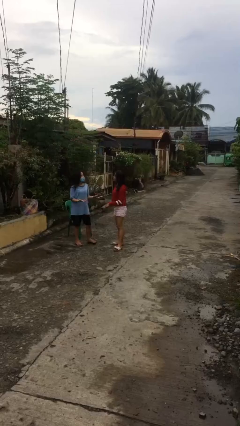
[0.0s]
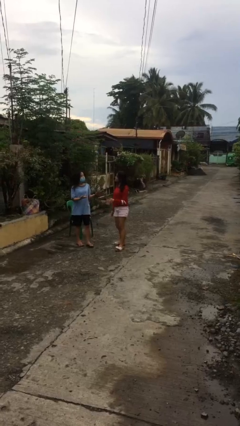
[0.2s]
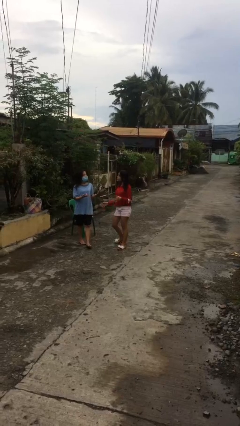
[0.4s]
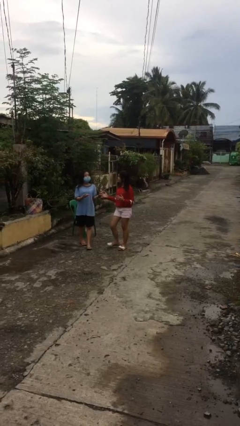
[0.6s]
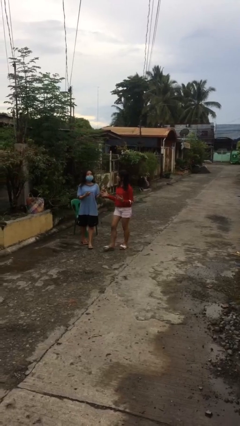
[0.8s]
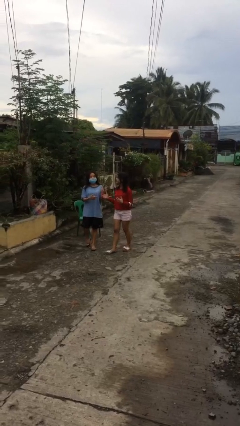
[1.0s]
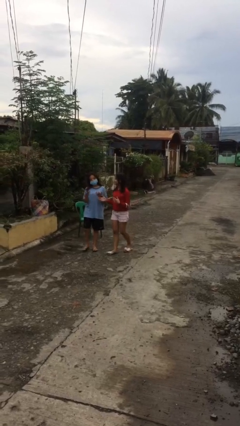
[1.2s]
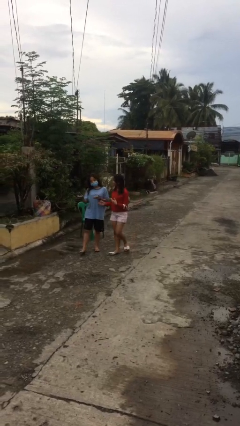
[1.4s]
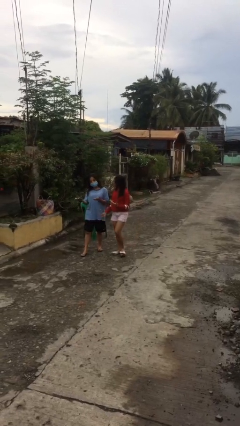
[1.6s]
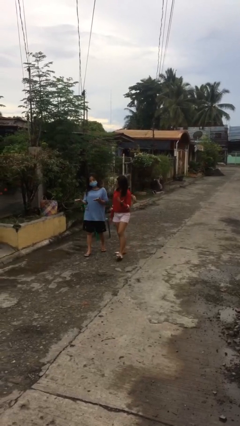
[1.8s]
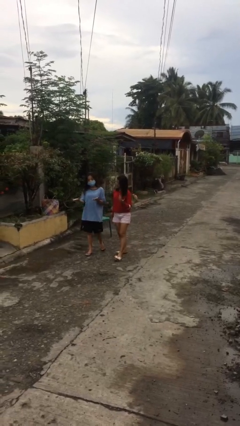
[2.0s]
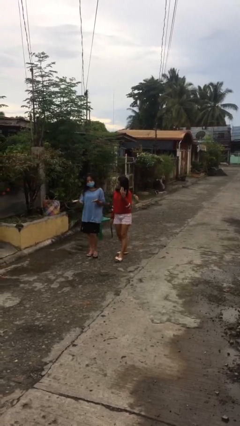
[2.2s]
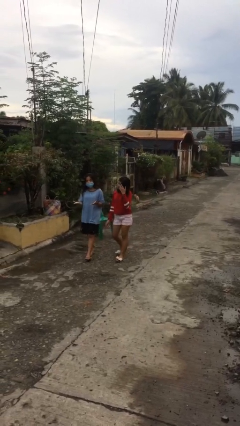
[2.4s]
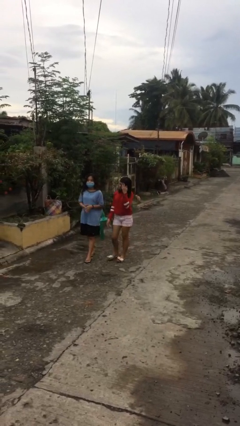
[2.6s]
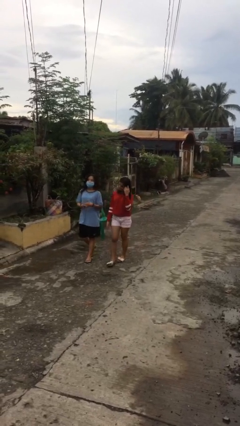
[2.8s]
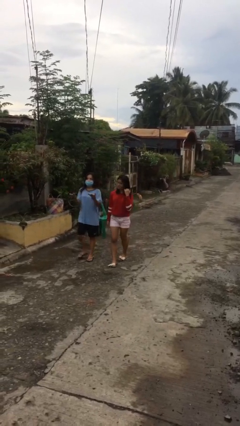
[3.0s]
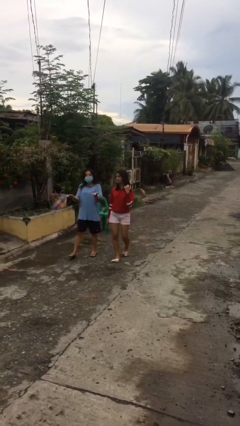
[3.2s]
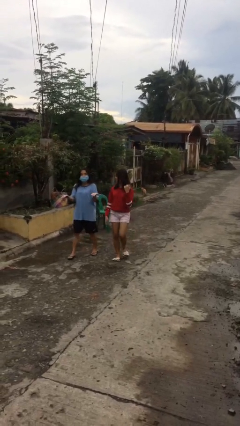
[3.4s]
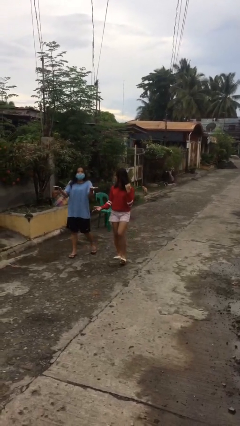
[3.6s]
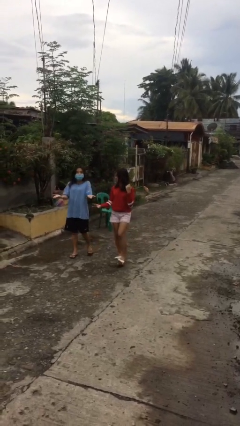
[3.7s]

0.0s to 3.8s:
person talks to person

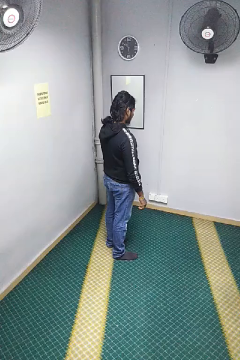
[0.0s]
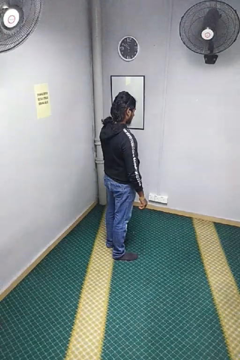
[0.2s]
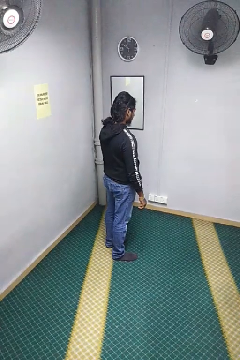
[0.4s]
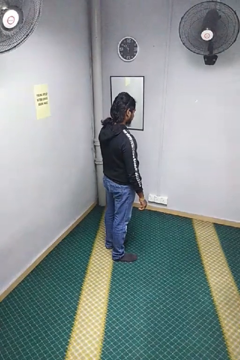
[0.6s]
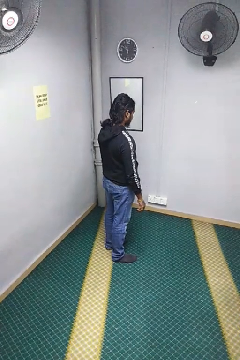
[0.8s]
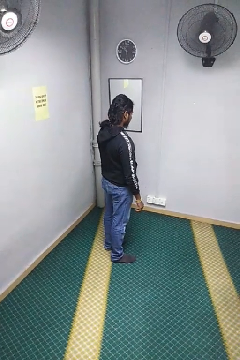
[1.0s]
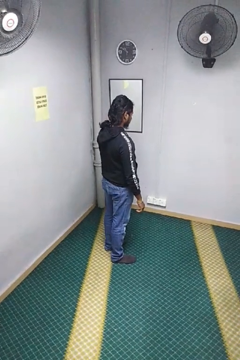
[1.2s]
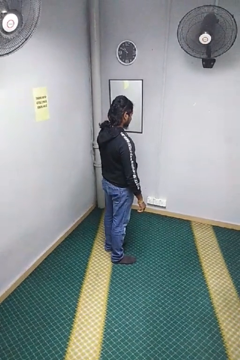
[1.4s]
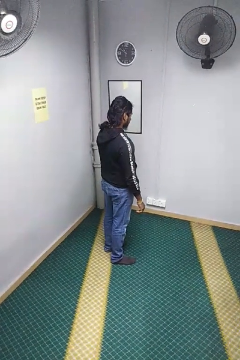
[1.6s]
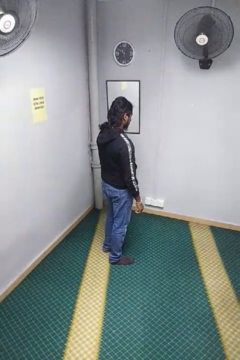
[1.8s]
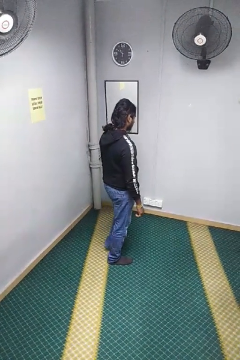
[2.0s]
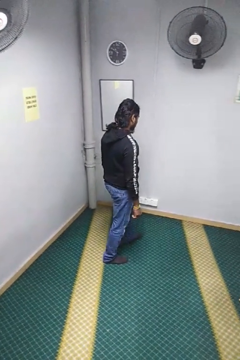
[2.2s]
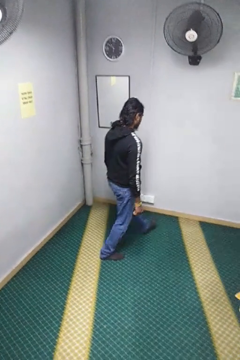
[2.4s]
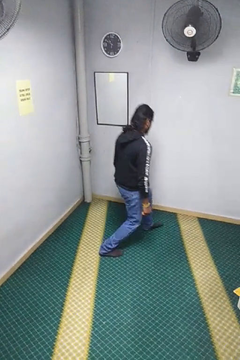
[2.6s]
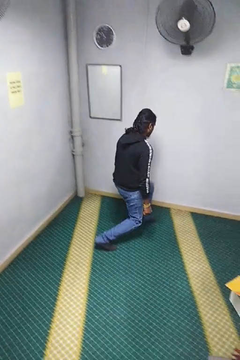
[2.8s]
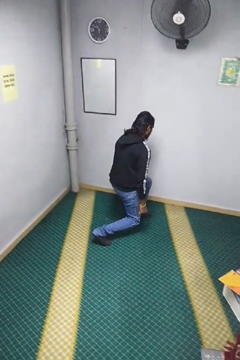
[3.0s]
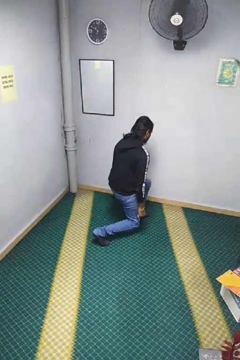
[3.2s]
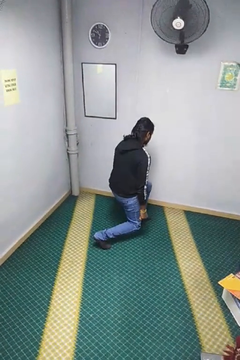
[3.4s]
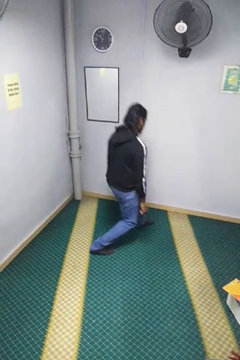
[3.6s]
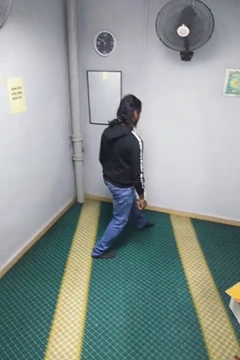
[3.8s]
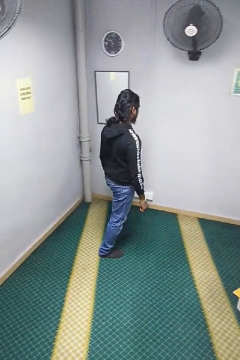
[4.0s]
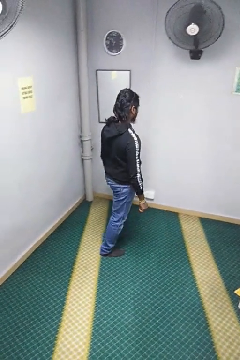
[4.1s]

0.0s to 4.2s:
person exercises with lunges

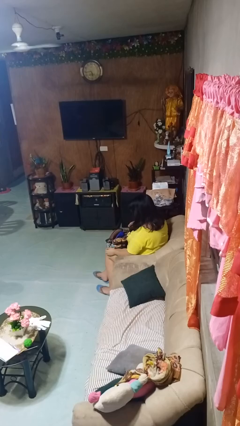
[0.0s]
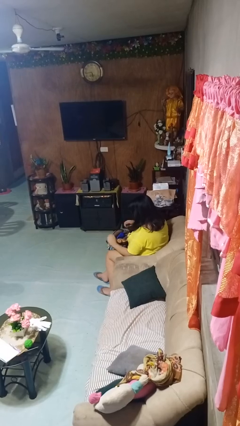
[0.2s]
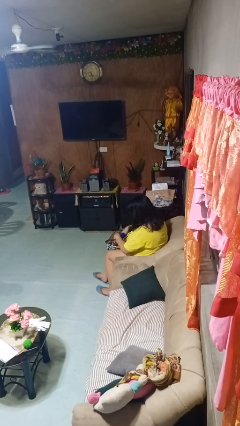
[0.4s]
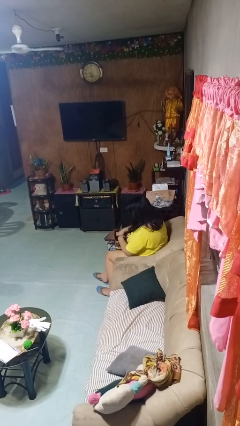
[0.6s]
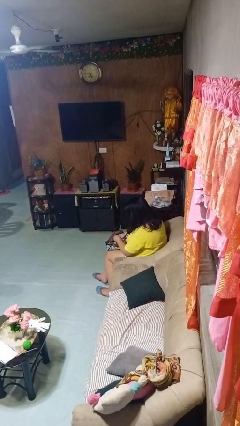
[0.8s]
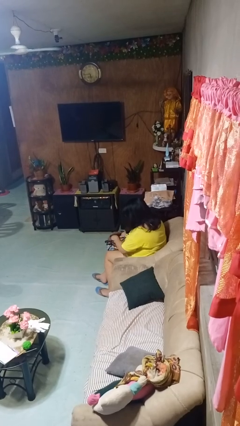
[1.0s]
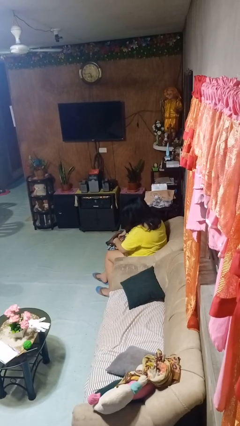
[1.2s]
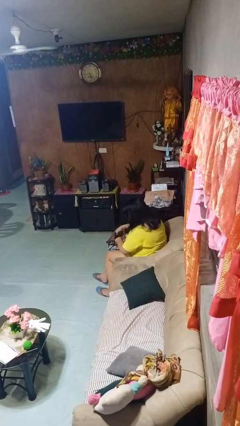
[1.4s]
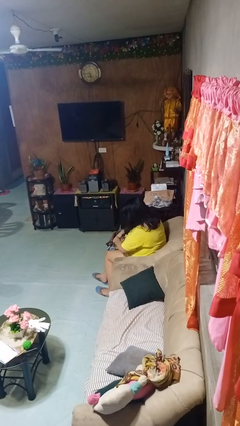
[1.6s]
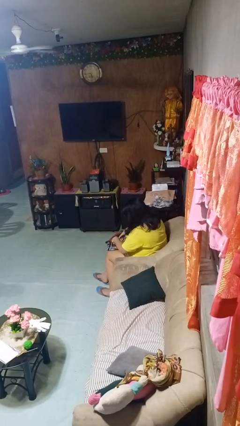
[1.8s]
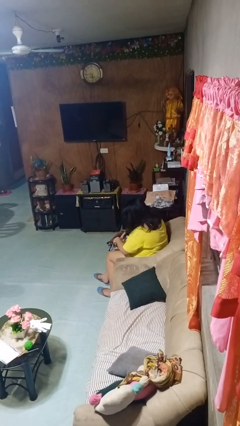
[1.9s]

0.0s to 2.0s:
person searches in backpack

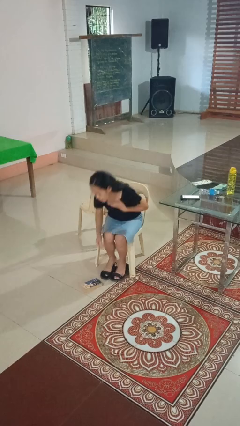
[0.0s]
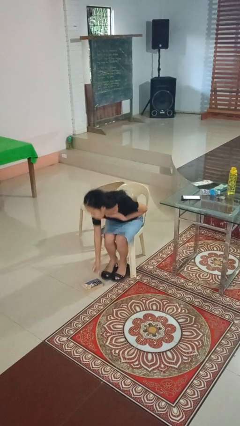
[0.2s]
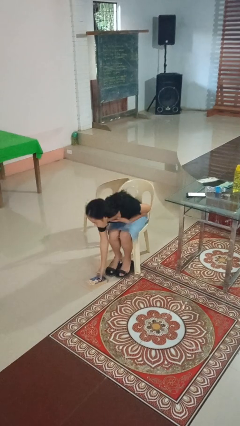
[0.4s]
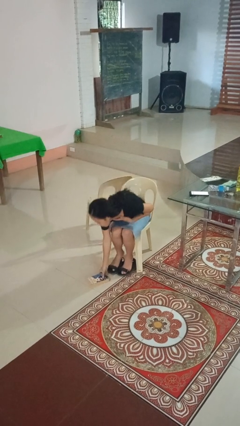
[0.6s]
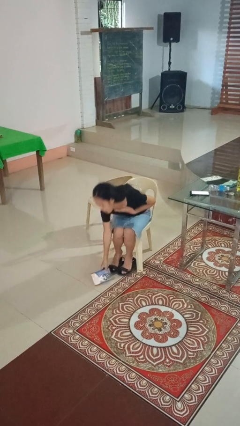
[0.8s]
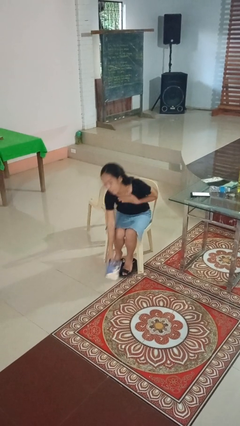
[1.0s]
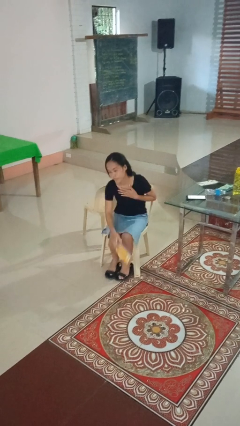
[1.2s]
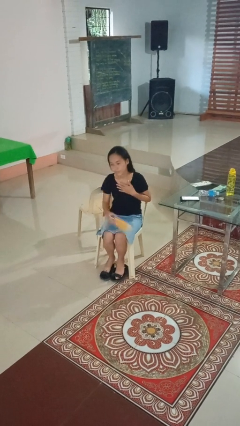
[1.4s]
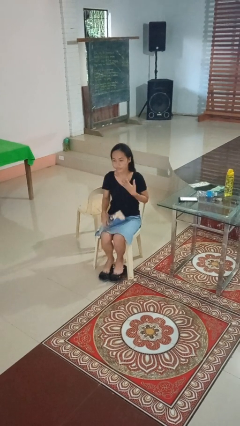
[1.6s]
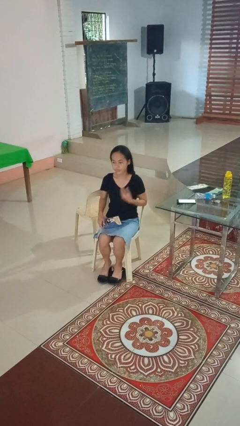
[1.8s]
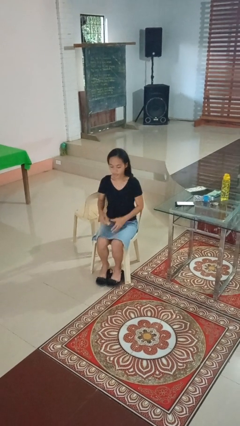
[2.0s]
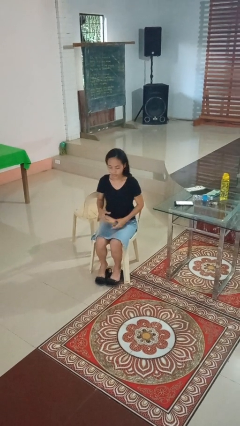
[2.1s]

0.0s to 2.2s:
person picks up object from floor

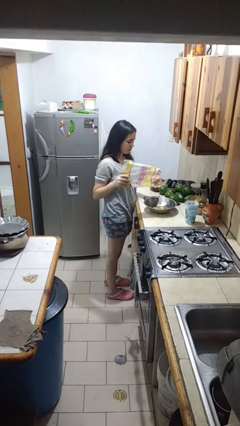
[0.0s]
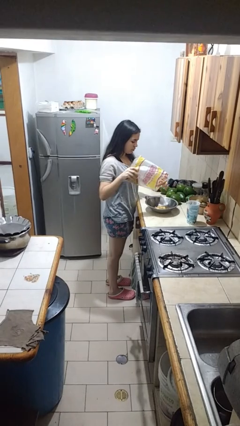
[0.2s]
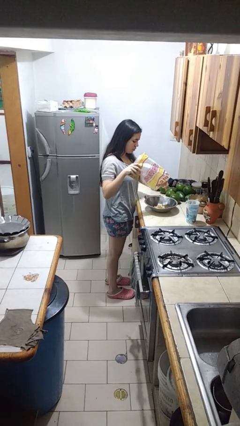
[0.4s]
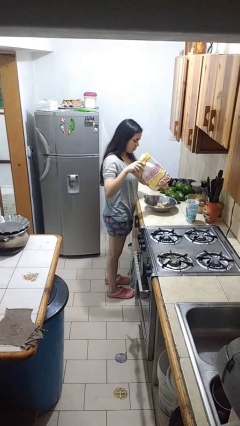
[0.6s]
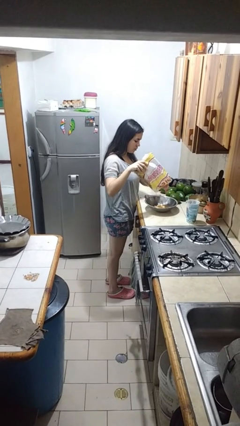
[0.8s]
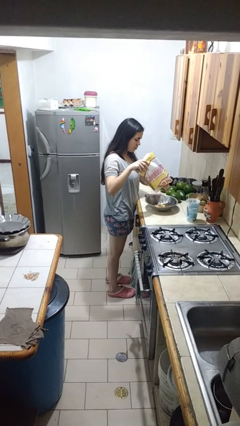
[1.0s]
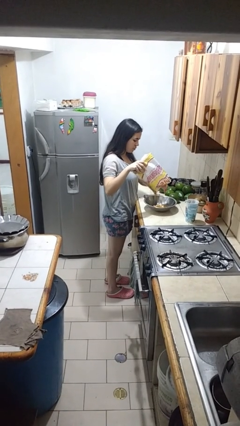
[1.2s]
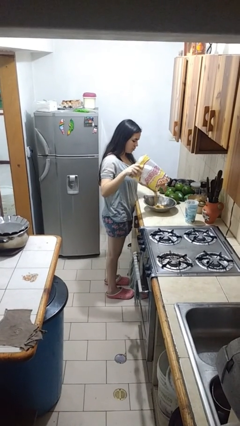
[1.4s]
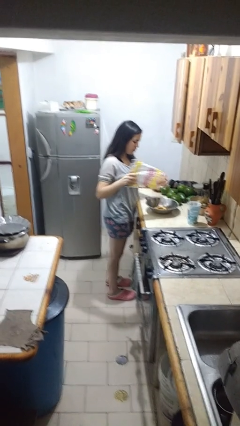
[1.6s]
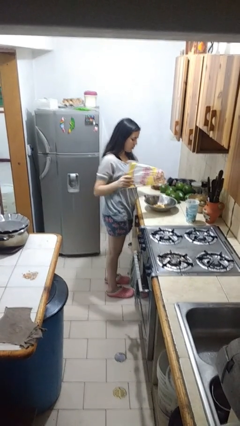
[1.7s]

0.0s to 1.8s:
person pours into bowl

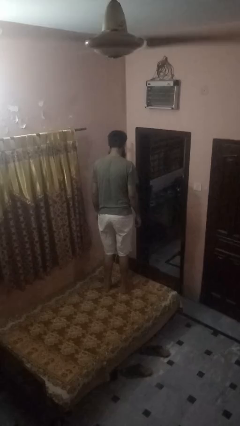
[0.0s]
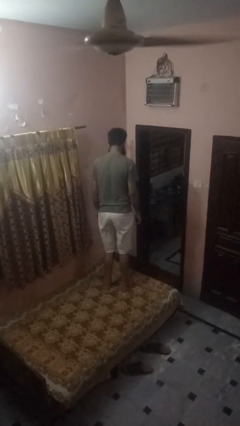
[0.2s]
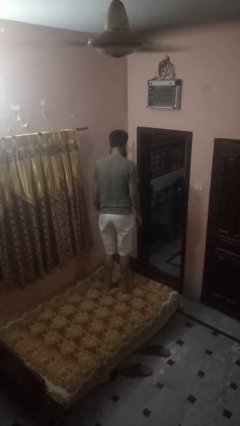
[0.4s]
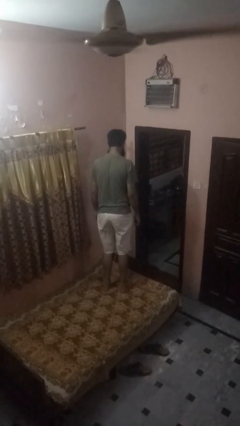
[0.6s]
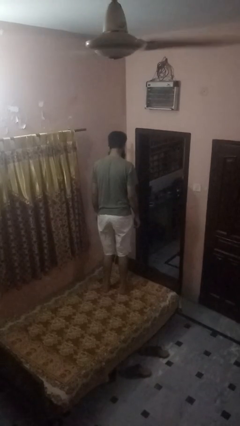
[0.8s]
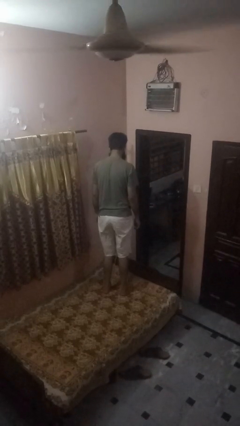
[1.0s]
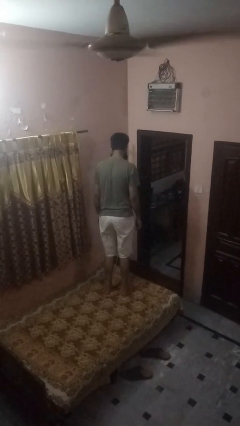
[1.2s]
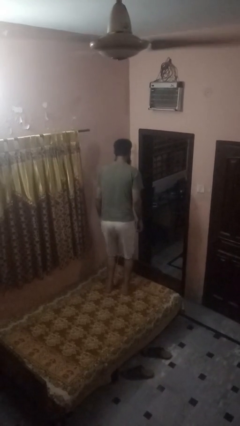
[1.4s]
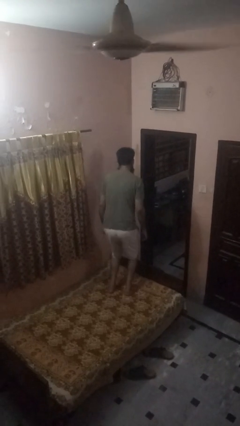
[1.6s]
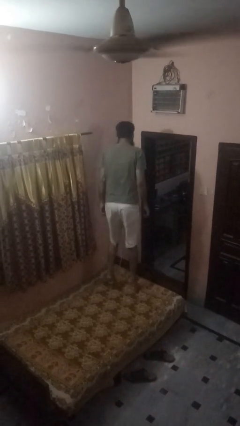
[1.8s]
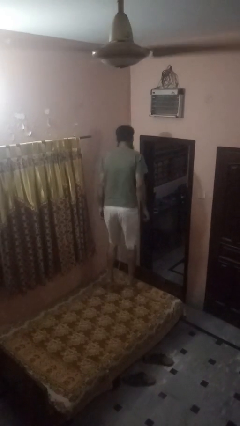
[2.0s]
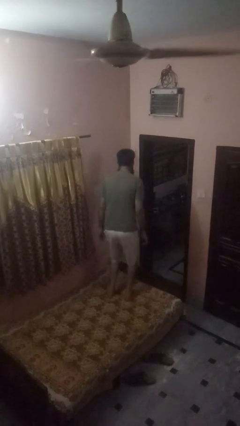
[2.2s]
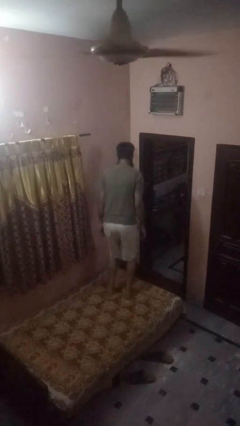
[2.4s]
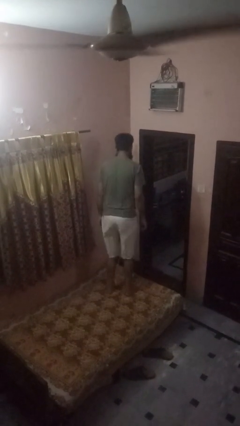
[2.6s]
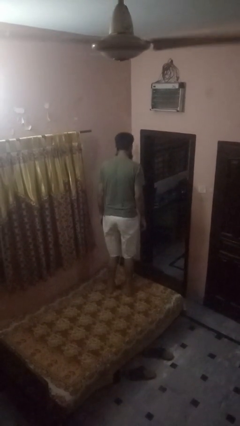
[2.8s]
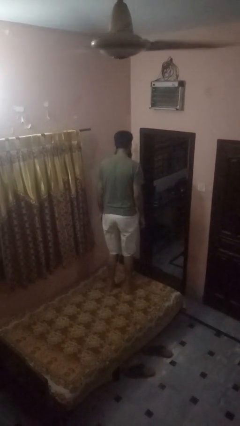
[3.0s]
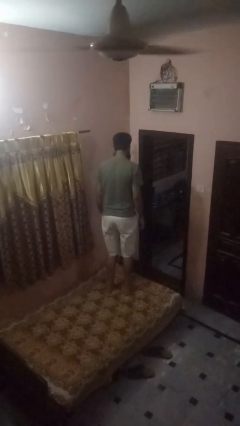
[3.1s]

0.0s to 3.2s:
person jumps on bed

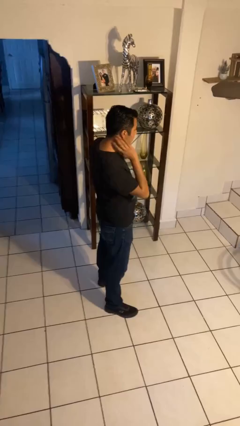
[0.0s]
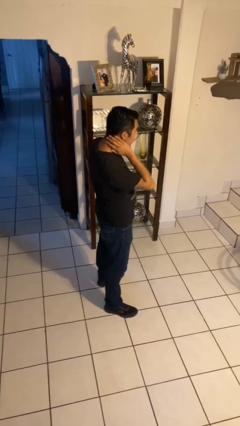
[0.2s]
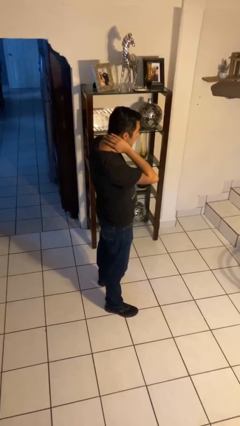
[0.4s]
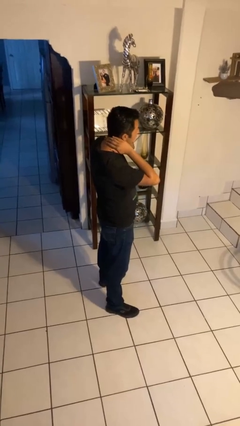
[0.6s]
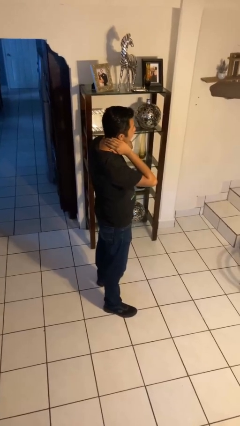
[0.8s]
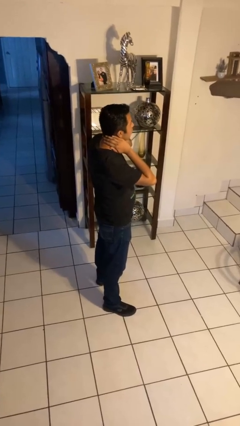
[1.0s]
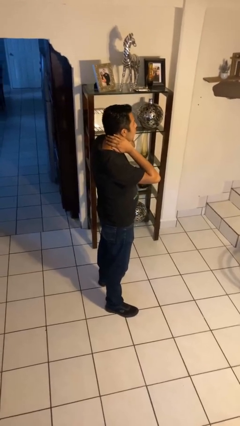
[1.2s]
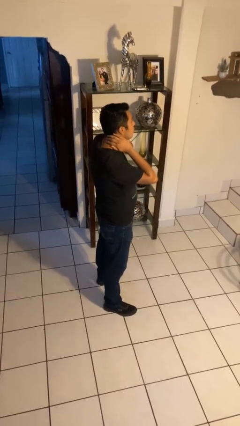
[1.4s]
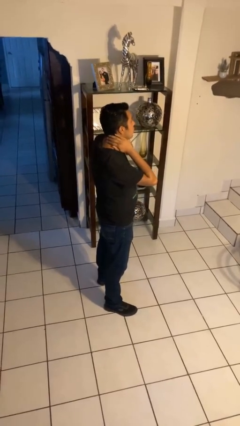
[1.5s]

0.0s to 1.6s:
person rubs neck
